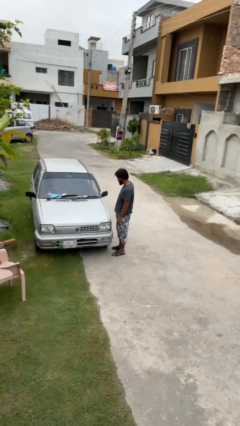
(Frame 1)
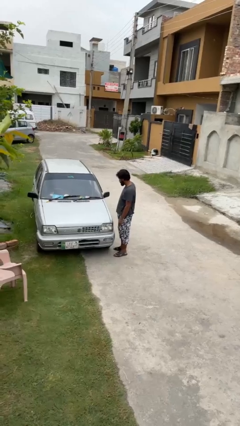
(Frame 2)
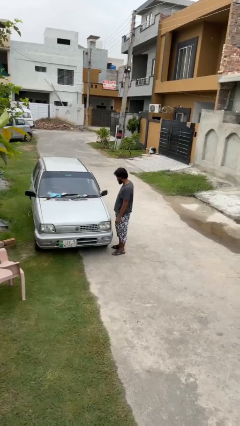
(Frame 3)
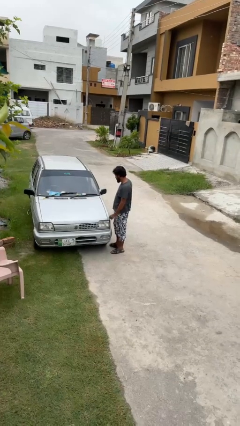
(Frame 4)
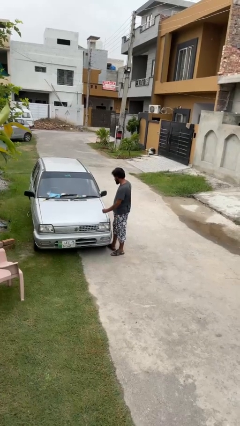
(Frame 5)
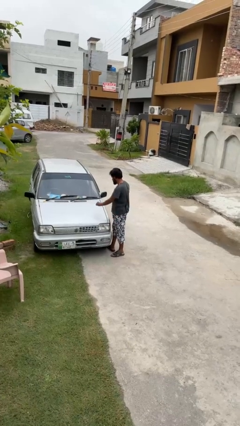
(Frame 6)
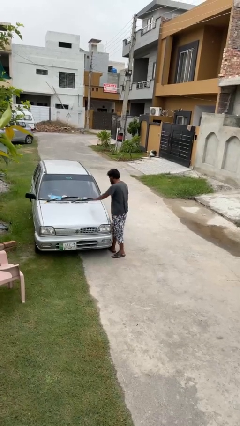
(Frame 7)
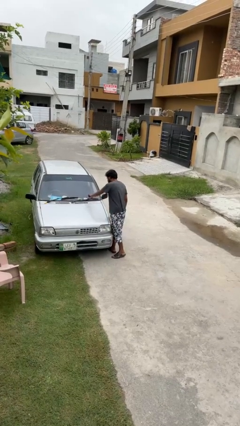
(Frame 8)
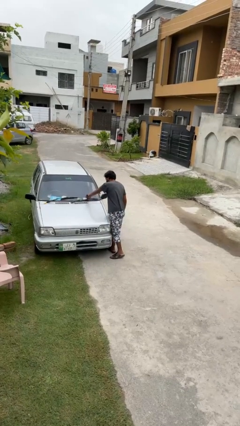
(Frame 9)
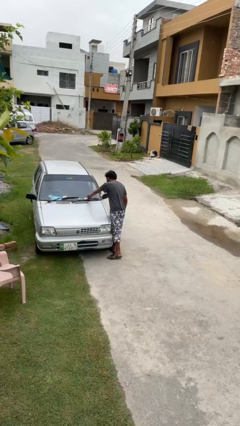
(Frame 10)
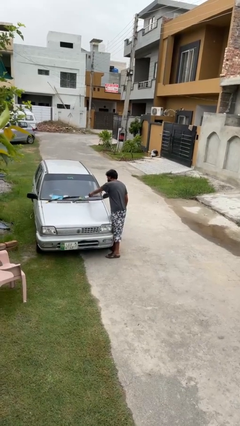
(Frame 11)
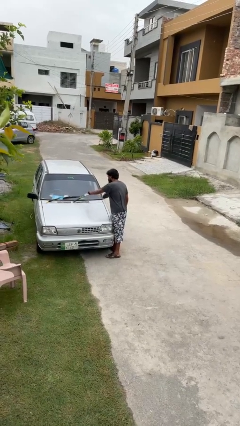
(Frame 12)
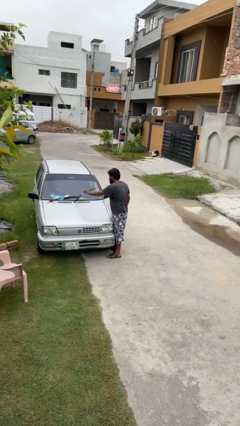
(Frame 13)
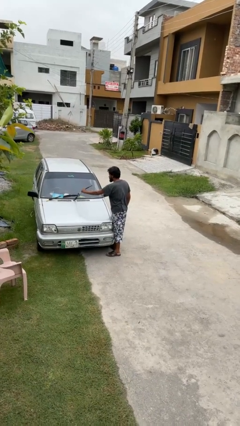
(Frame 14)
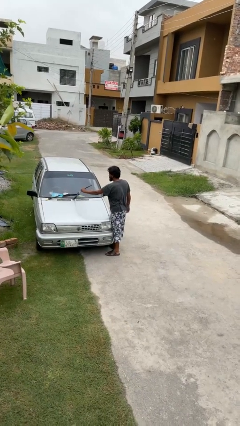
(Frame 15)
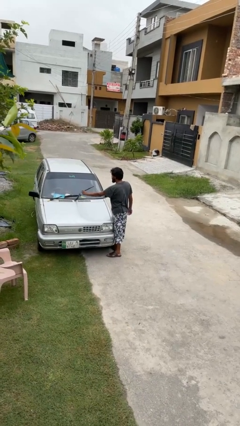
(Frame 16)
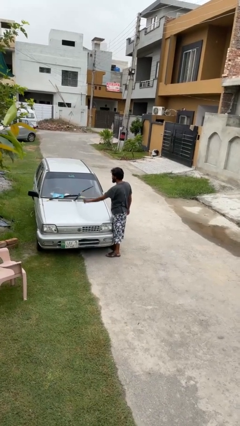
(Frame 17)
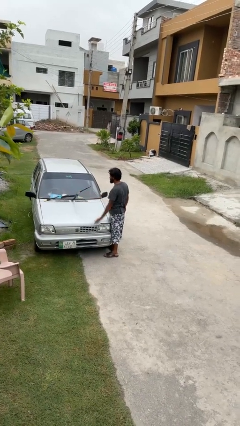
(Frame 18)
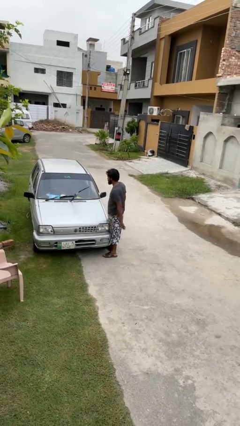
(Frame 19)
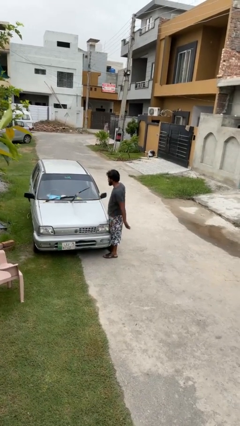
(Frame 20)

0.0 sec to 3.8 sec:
person flips up car wipers

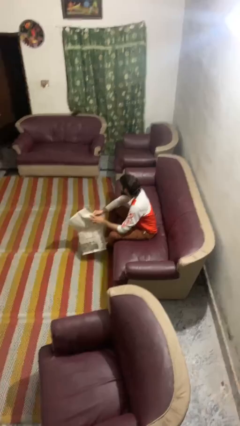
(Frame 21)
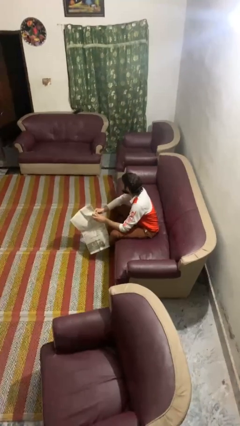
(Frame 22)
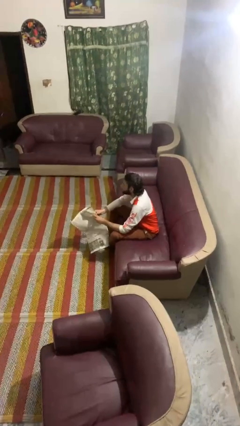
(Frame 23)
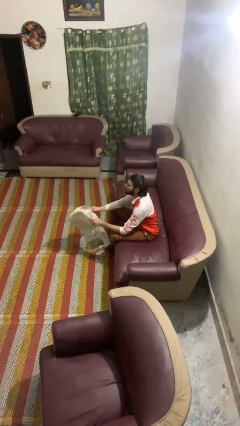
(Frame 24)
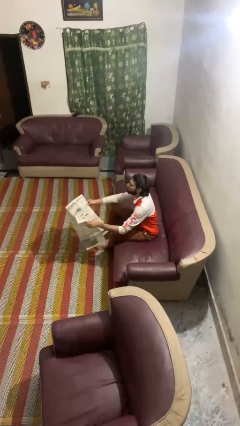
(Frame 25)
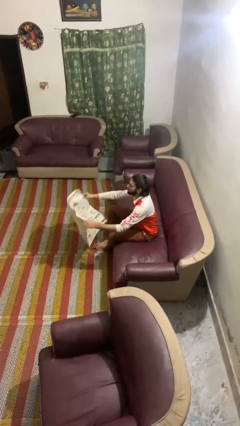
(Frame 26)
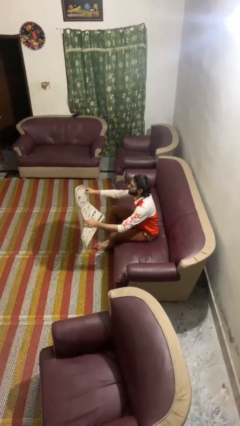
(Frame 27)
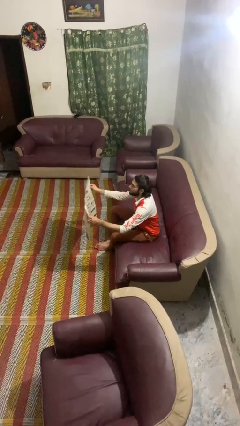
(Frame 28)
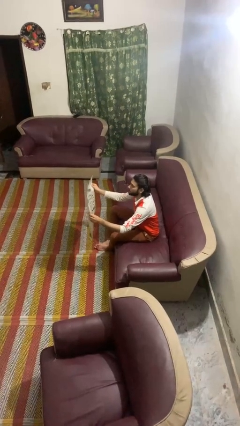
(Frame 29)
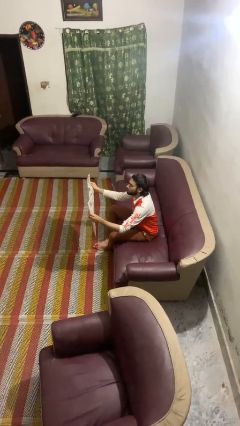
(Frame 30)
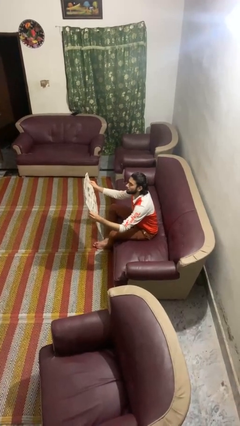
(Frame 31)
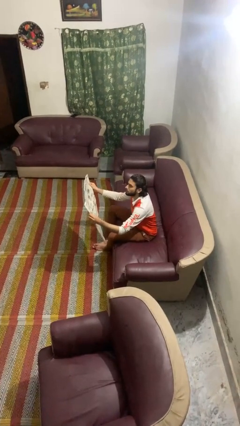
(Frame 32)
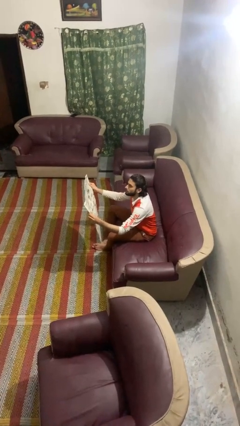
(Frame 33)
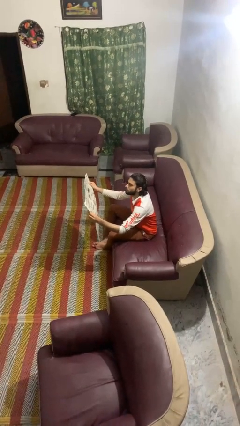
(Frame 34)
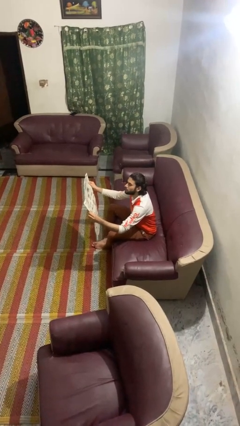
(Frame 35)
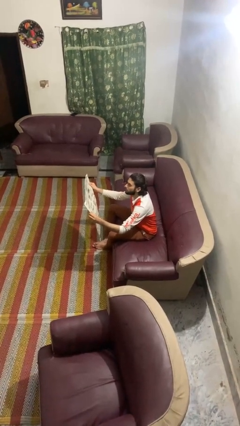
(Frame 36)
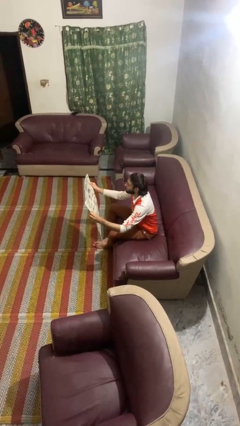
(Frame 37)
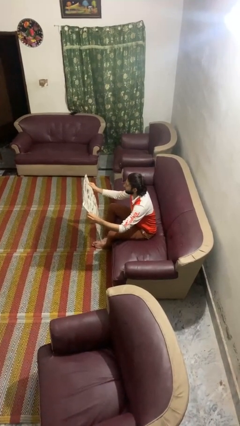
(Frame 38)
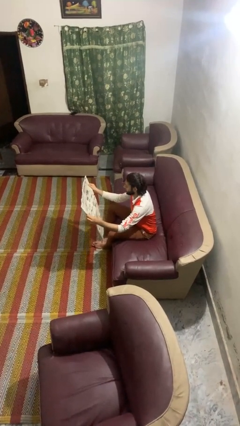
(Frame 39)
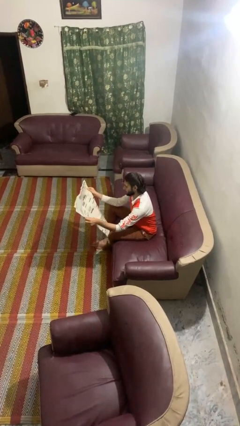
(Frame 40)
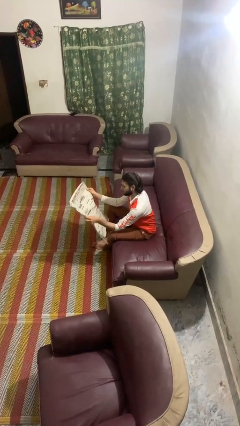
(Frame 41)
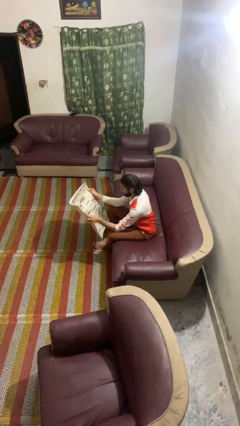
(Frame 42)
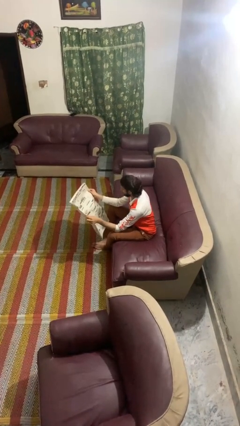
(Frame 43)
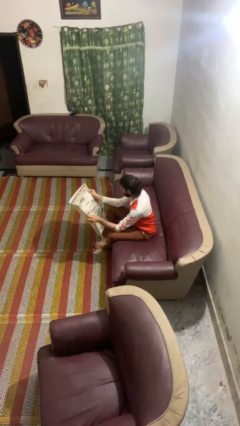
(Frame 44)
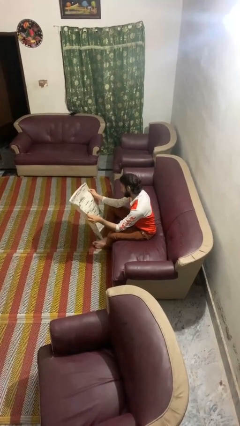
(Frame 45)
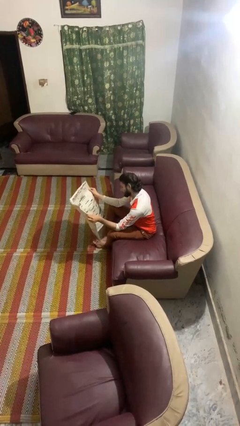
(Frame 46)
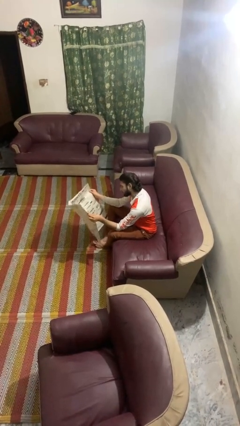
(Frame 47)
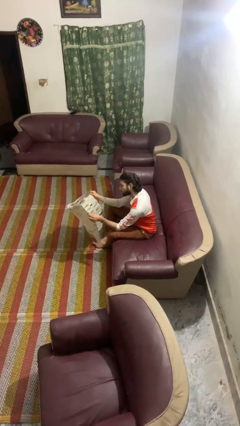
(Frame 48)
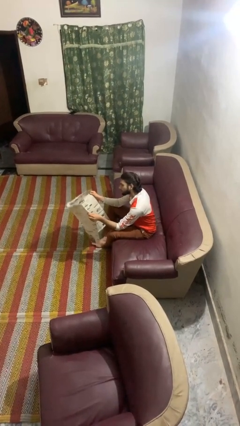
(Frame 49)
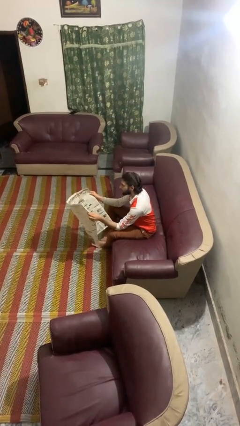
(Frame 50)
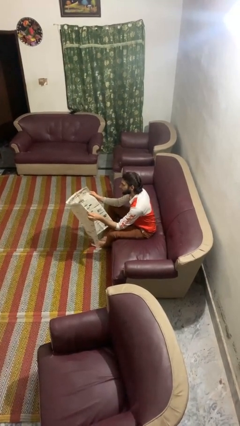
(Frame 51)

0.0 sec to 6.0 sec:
person reads newspaper

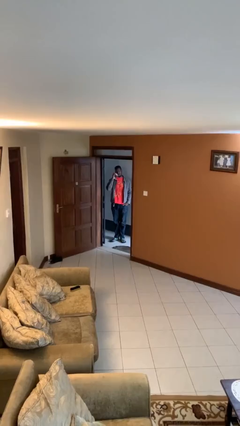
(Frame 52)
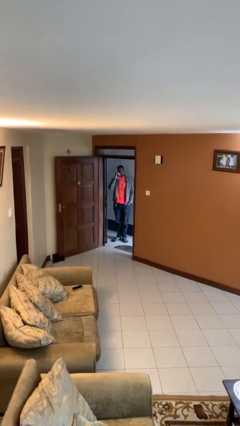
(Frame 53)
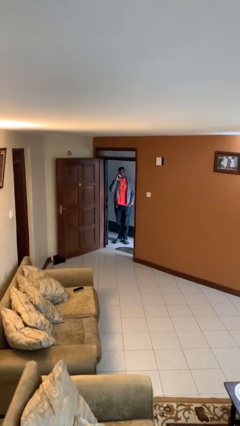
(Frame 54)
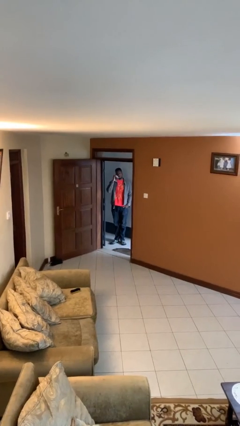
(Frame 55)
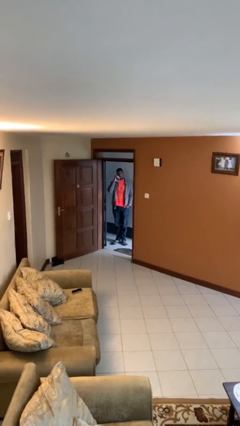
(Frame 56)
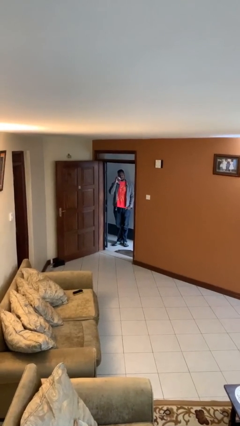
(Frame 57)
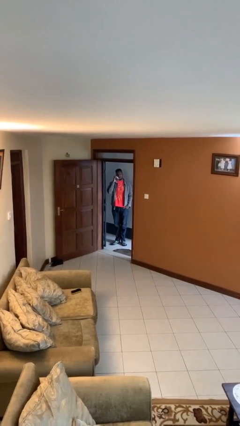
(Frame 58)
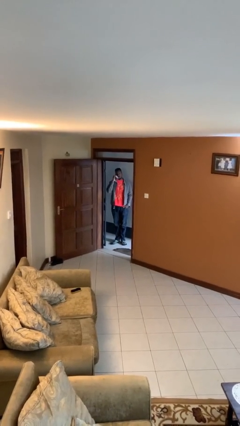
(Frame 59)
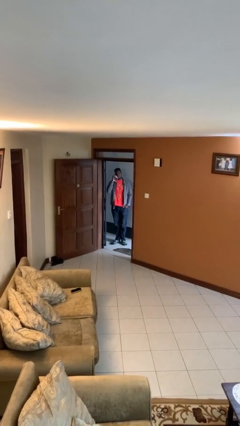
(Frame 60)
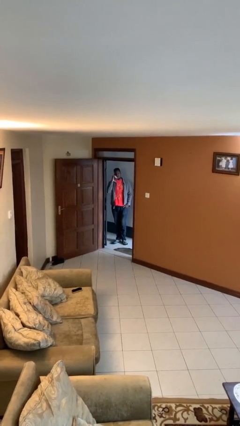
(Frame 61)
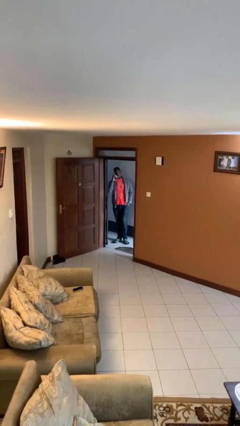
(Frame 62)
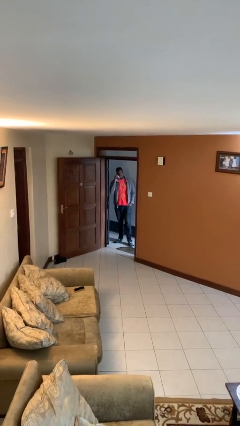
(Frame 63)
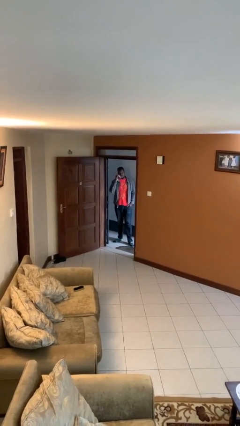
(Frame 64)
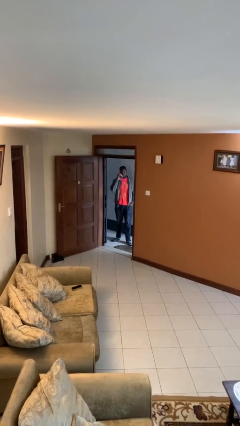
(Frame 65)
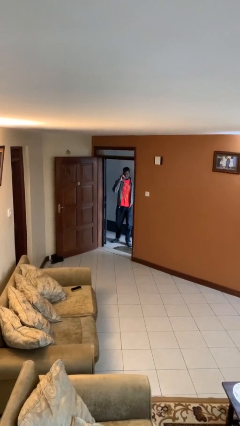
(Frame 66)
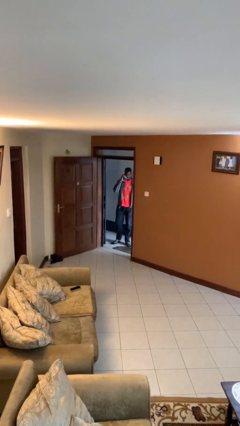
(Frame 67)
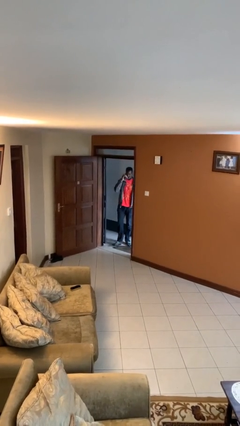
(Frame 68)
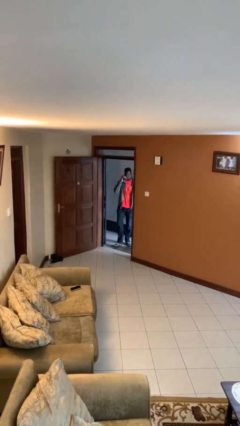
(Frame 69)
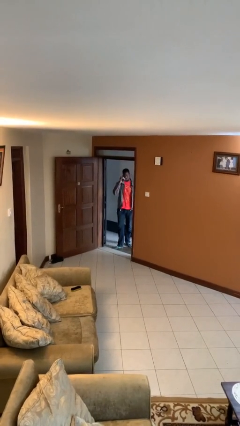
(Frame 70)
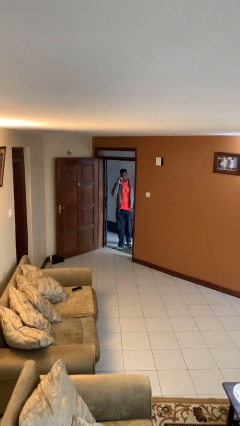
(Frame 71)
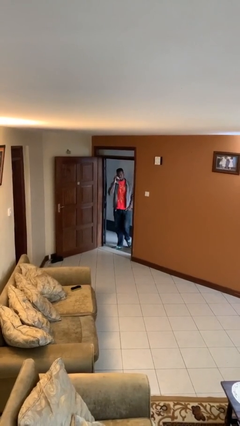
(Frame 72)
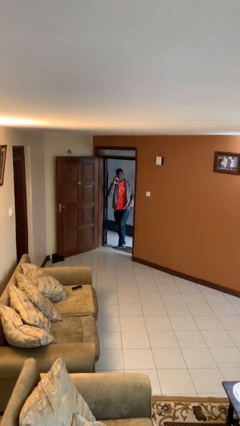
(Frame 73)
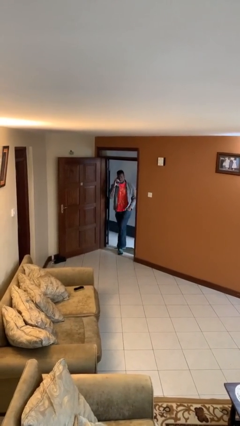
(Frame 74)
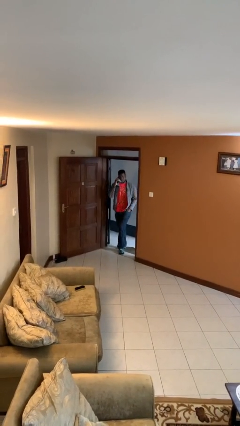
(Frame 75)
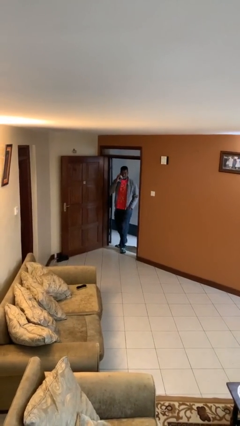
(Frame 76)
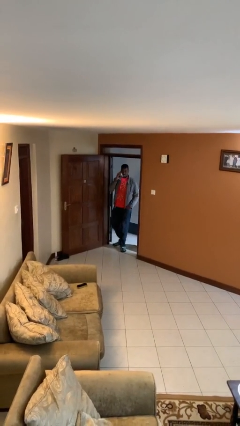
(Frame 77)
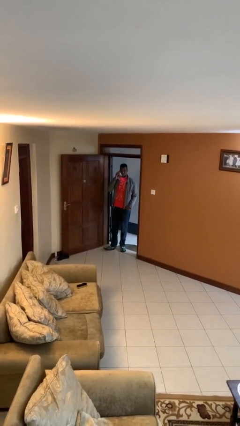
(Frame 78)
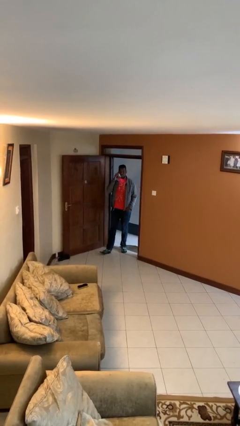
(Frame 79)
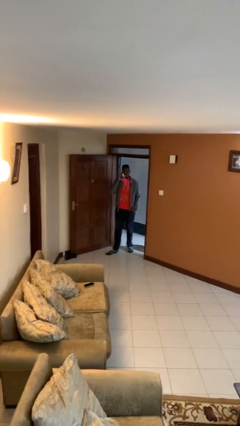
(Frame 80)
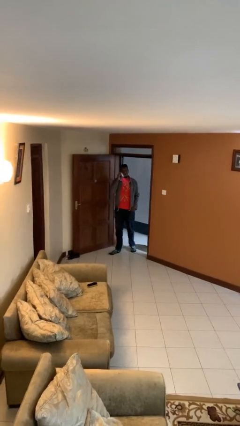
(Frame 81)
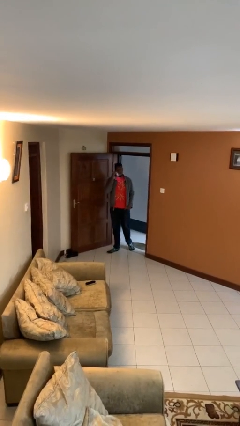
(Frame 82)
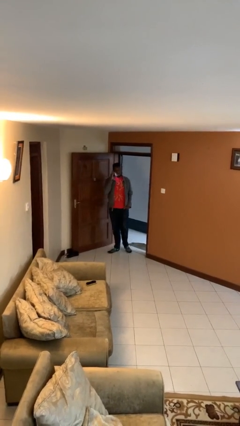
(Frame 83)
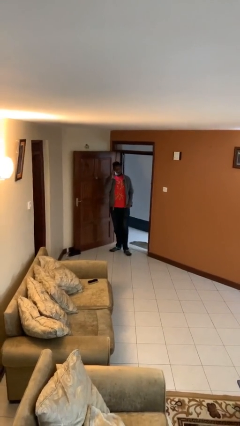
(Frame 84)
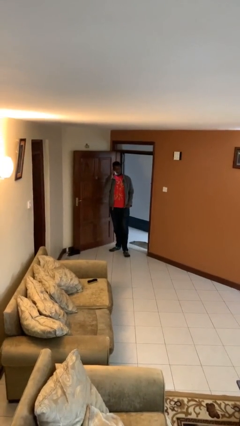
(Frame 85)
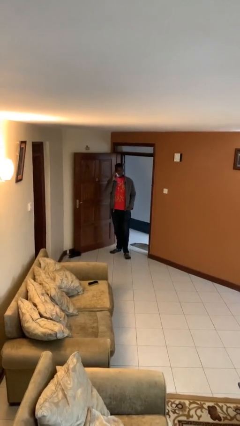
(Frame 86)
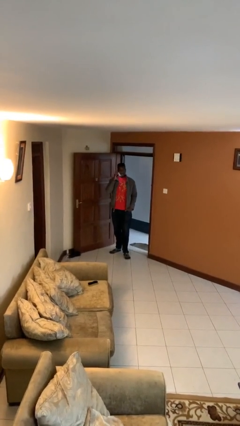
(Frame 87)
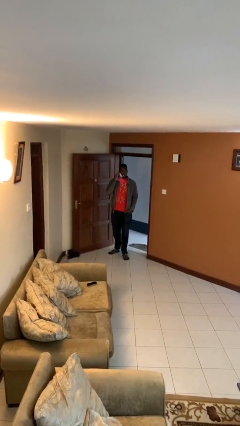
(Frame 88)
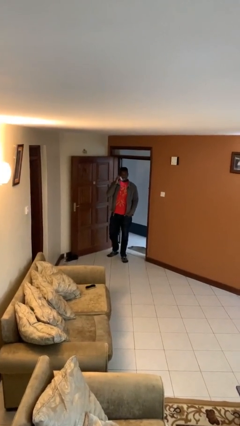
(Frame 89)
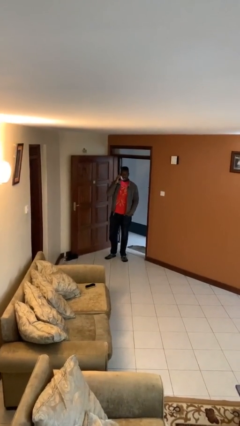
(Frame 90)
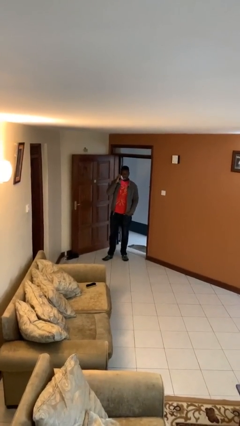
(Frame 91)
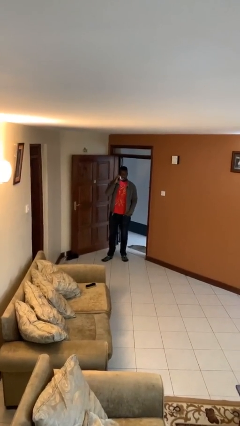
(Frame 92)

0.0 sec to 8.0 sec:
person enters scene through structure

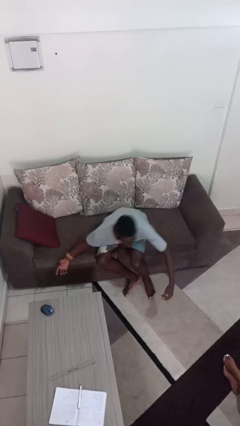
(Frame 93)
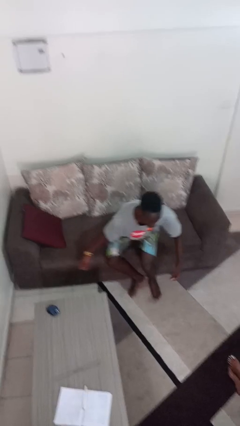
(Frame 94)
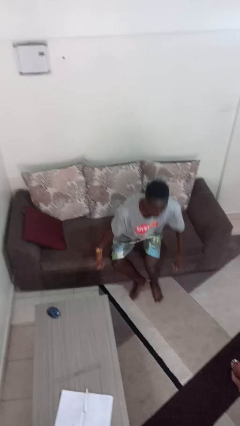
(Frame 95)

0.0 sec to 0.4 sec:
person lies down on couch
